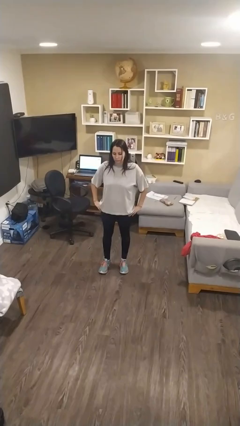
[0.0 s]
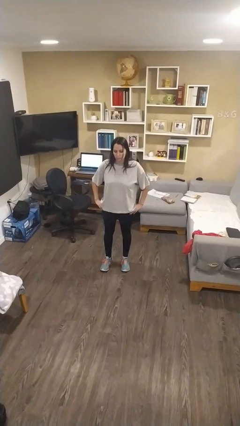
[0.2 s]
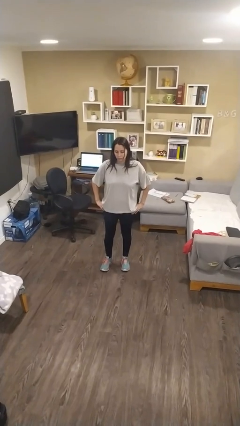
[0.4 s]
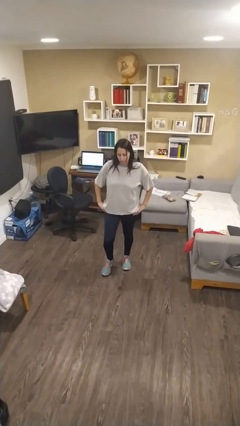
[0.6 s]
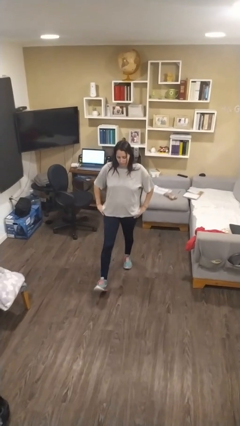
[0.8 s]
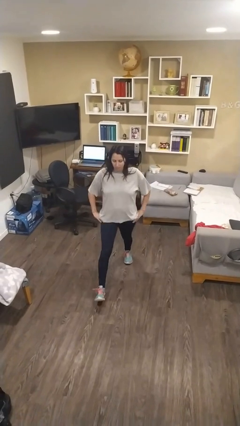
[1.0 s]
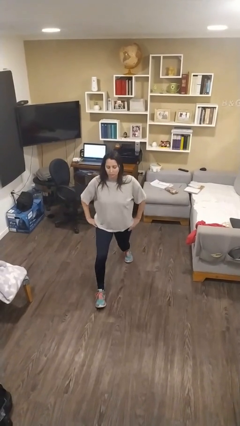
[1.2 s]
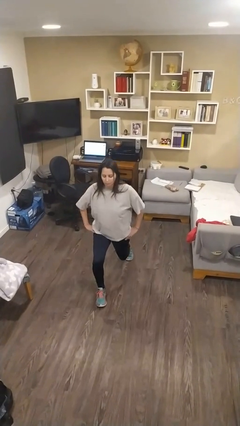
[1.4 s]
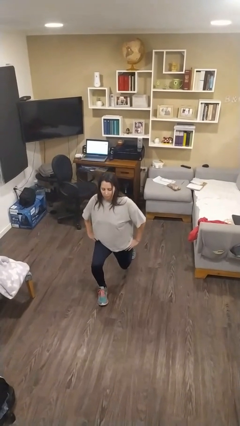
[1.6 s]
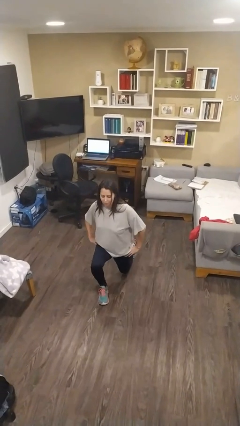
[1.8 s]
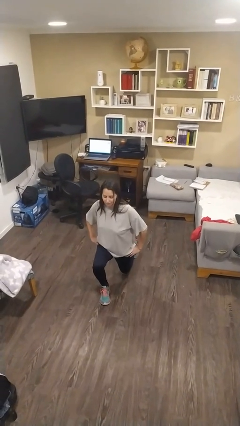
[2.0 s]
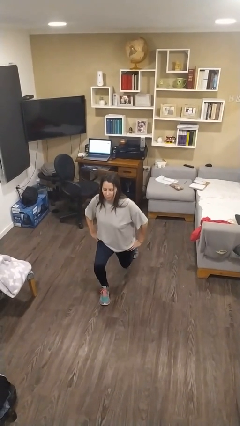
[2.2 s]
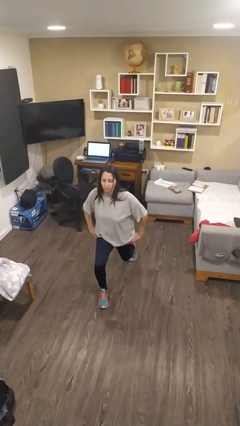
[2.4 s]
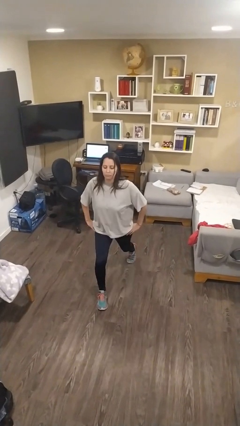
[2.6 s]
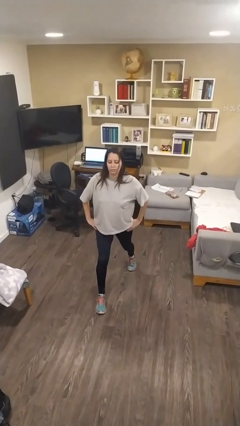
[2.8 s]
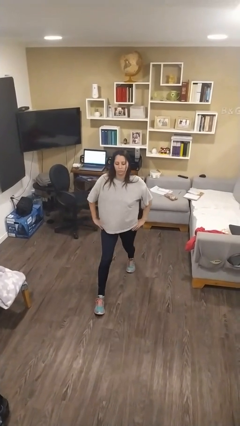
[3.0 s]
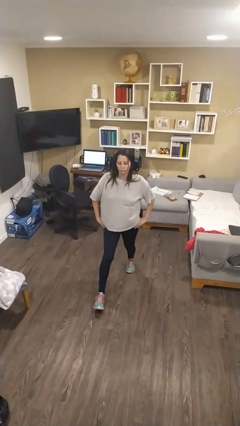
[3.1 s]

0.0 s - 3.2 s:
person exercises with lunges

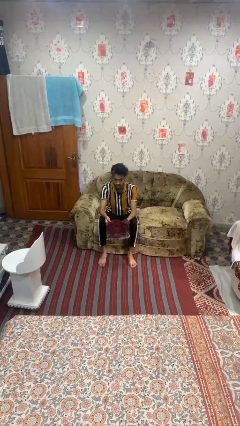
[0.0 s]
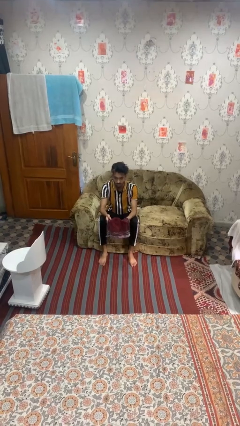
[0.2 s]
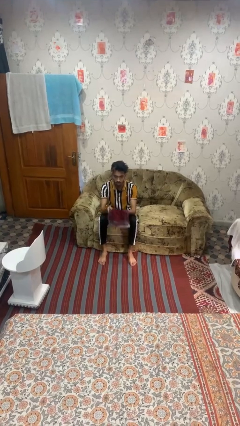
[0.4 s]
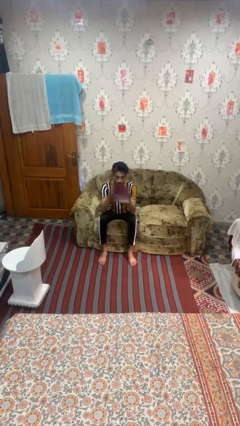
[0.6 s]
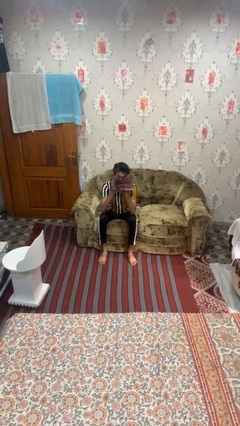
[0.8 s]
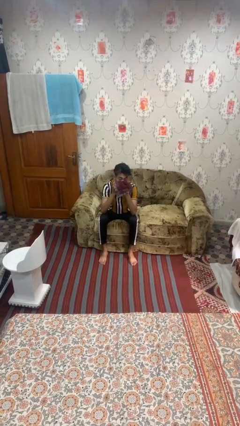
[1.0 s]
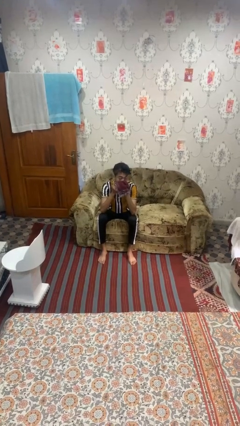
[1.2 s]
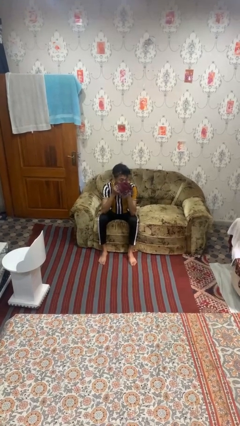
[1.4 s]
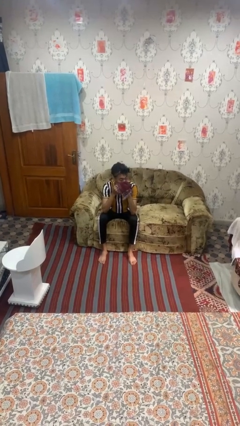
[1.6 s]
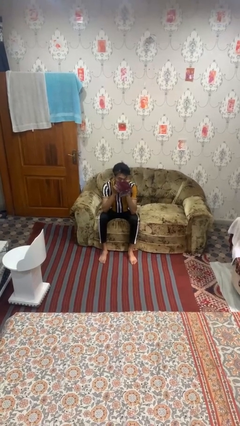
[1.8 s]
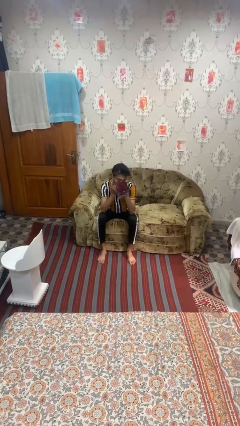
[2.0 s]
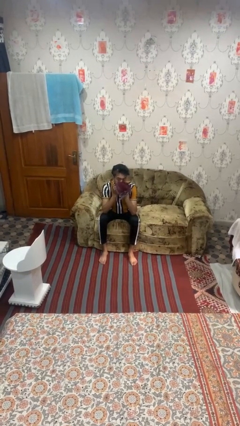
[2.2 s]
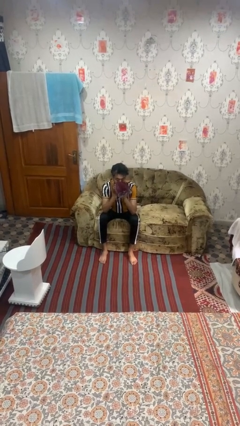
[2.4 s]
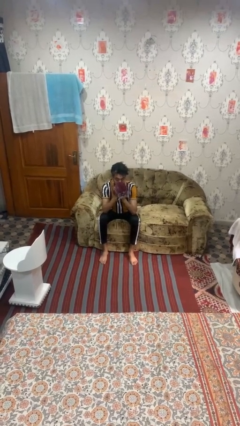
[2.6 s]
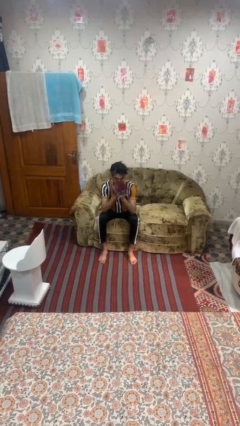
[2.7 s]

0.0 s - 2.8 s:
person blows nose

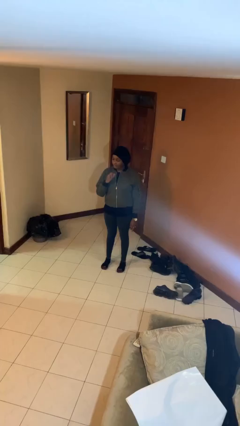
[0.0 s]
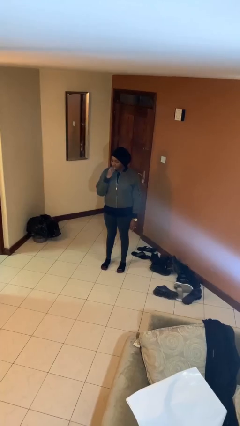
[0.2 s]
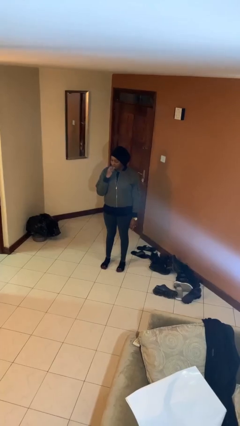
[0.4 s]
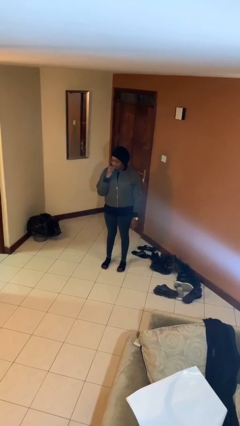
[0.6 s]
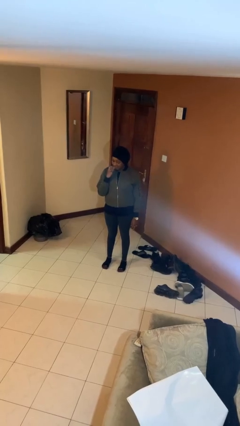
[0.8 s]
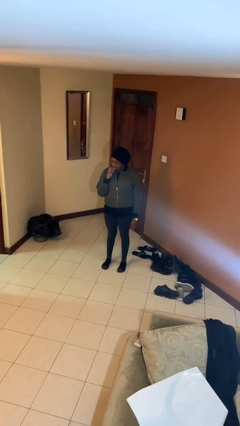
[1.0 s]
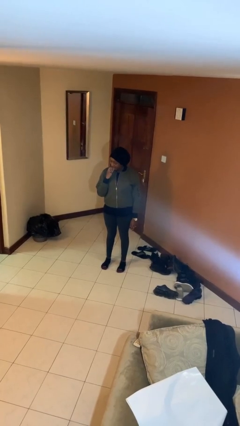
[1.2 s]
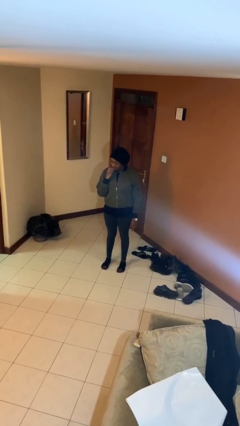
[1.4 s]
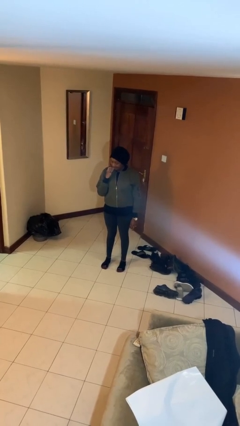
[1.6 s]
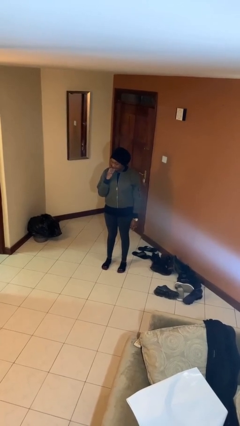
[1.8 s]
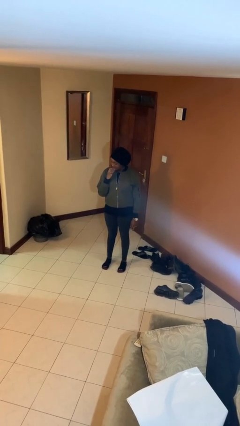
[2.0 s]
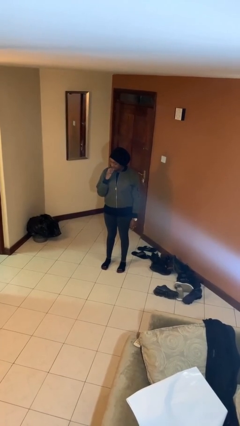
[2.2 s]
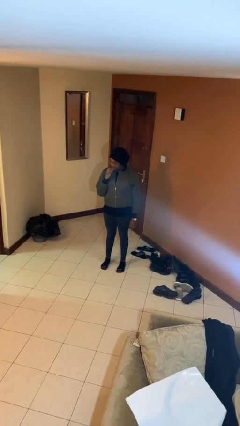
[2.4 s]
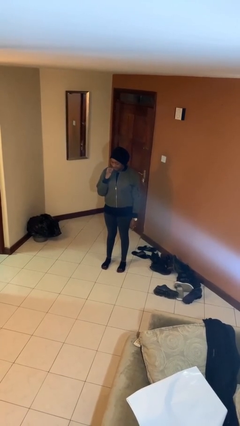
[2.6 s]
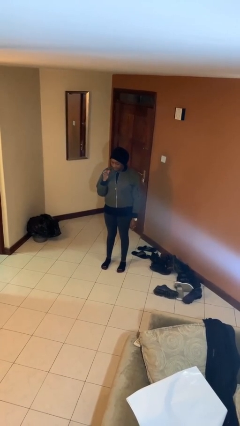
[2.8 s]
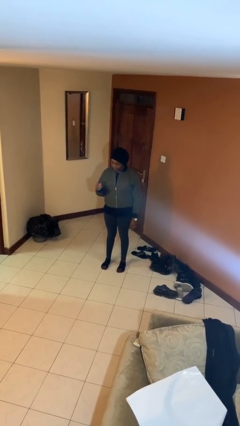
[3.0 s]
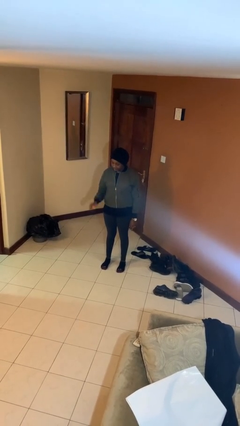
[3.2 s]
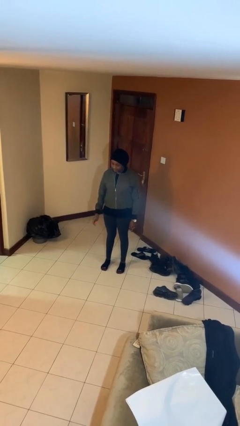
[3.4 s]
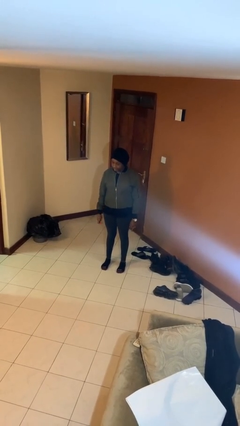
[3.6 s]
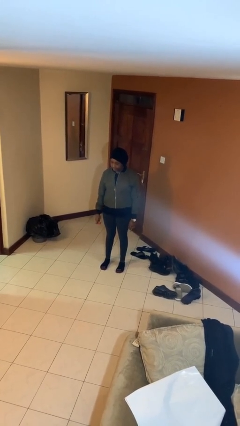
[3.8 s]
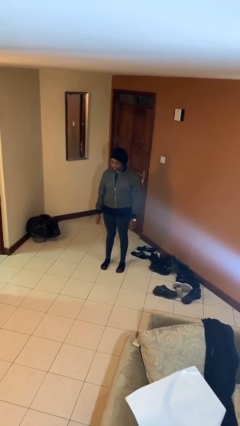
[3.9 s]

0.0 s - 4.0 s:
person applies lip makeup

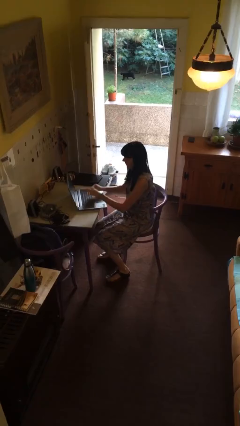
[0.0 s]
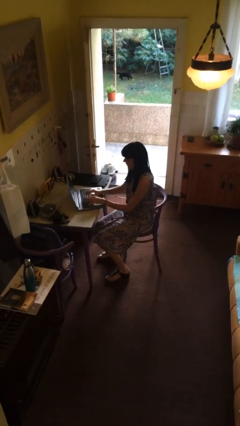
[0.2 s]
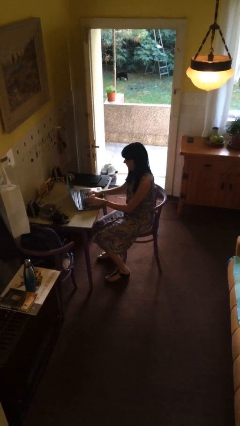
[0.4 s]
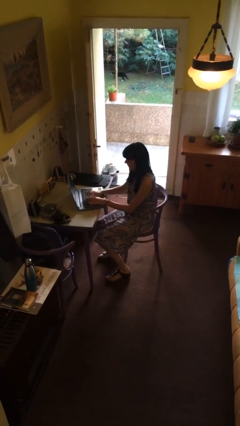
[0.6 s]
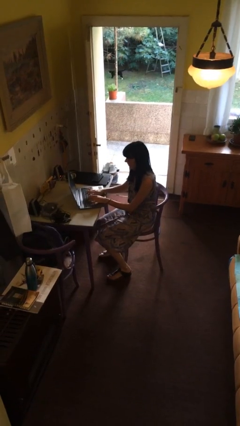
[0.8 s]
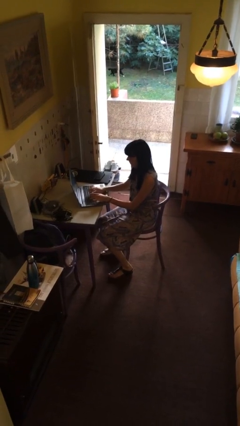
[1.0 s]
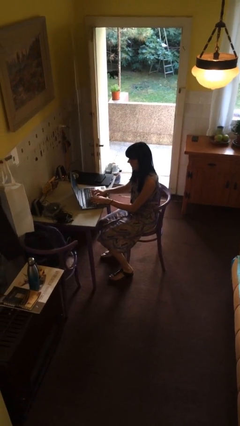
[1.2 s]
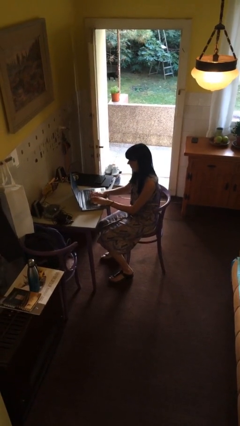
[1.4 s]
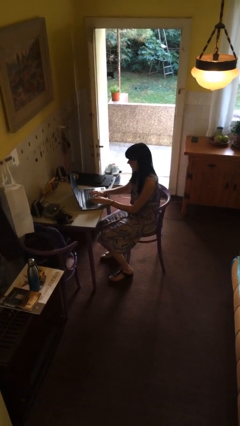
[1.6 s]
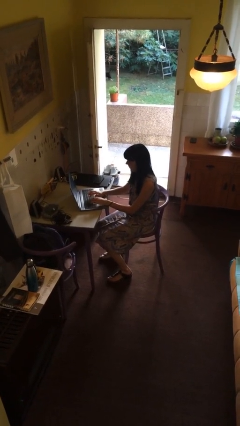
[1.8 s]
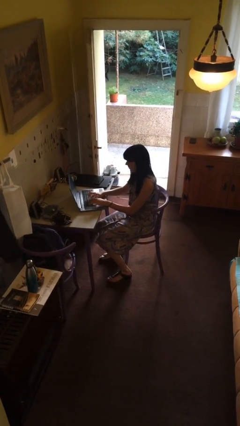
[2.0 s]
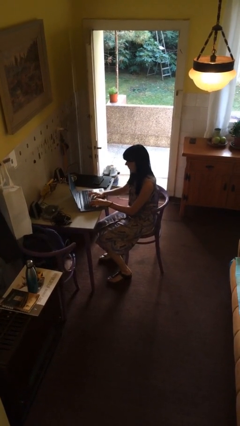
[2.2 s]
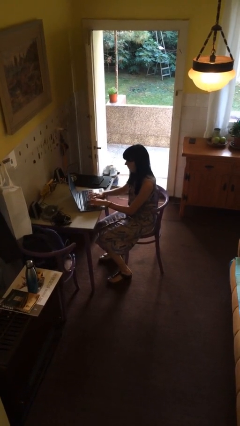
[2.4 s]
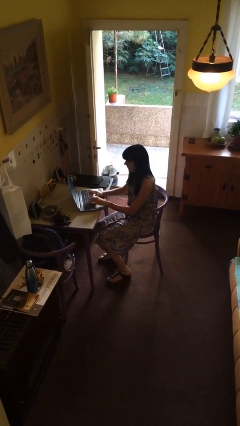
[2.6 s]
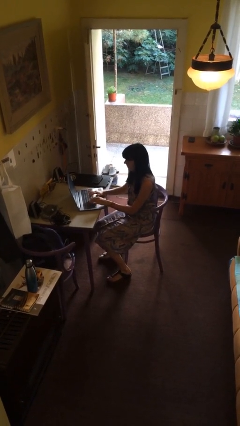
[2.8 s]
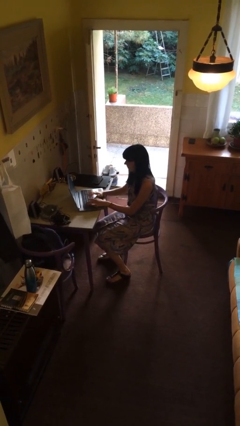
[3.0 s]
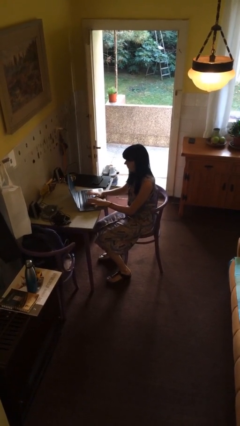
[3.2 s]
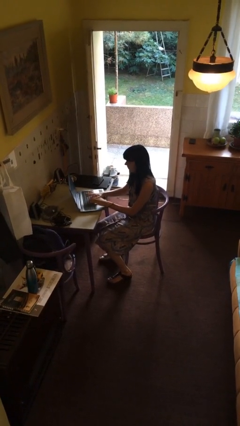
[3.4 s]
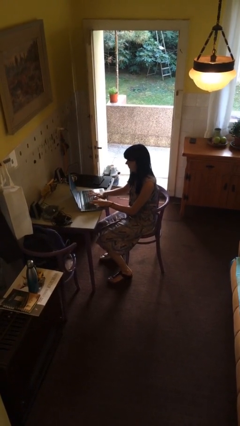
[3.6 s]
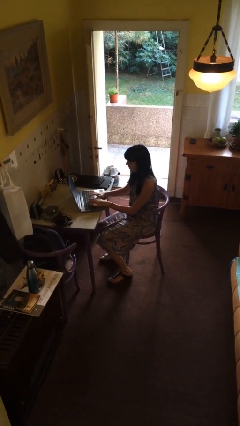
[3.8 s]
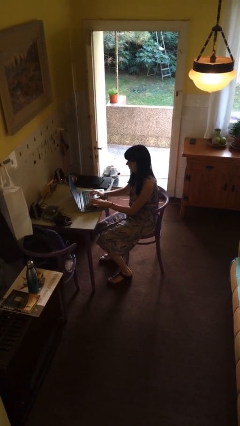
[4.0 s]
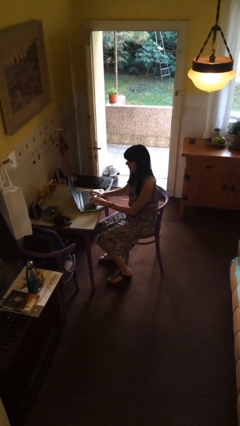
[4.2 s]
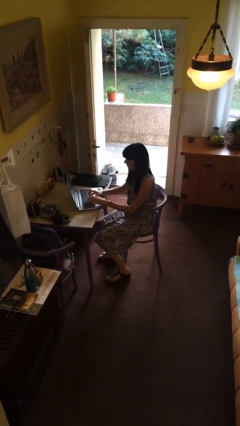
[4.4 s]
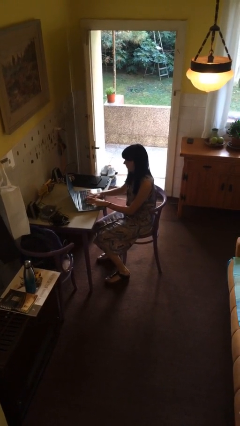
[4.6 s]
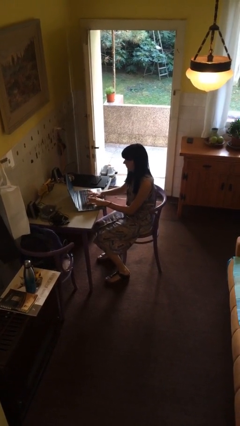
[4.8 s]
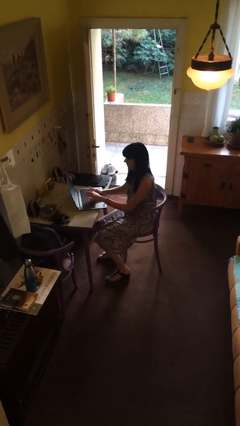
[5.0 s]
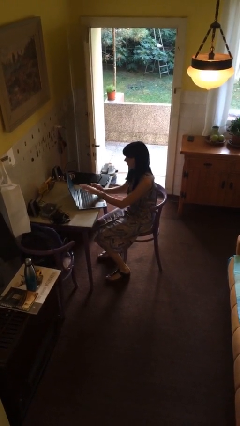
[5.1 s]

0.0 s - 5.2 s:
person interacts with laptop

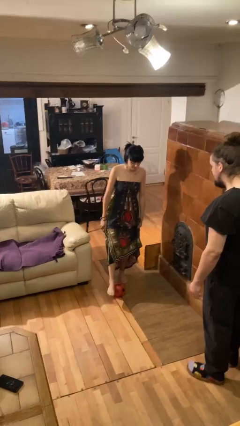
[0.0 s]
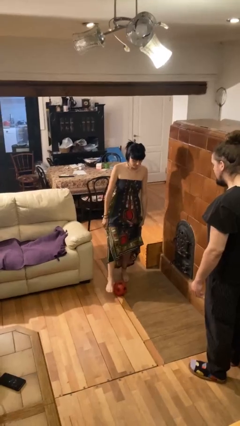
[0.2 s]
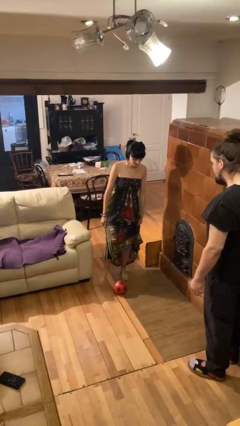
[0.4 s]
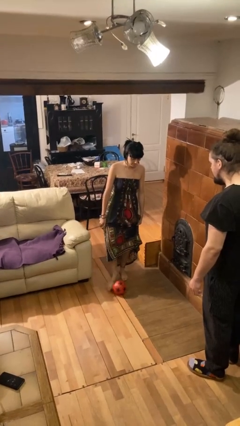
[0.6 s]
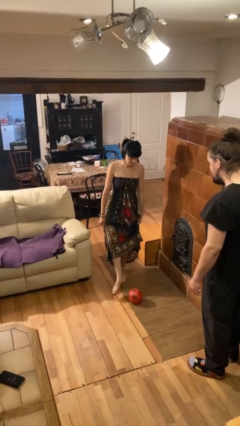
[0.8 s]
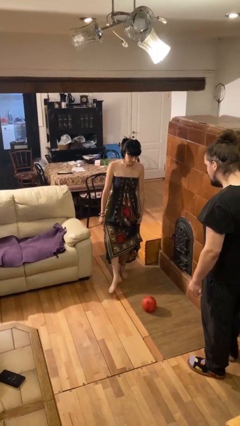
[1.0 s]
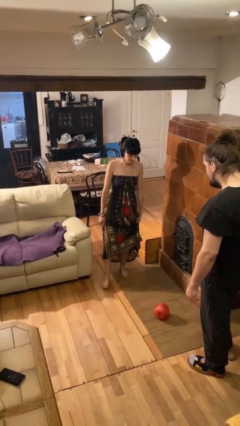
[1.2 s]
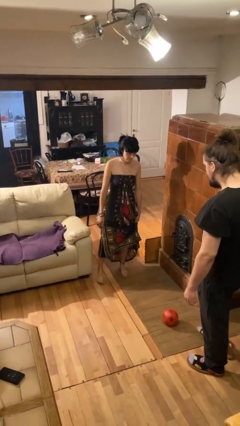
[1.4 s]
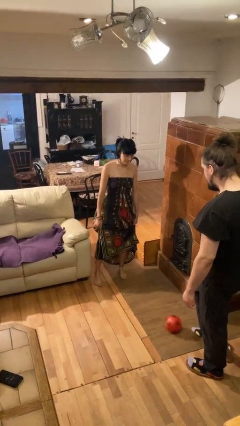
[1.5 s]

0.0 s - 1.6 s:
person kicks object to person

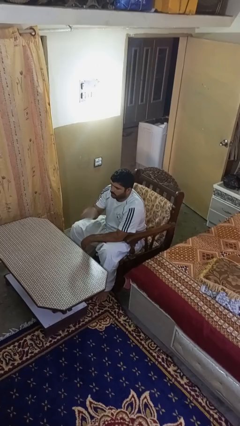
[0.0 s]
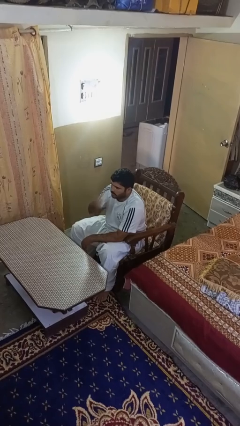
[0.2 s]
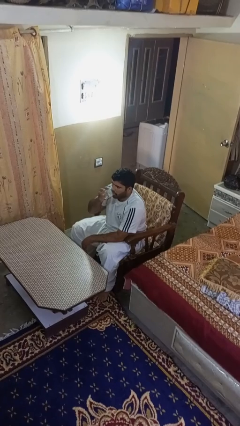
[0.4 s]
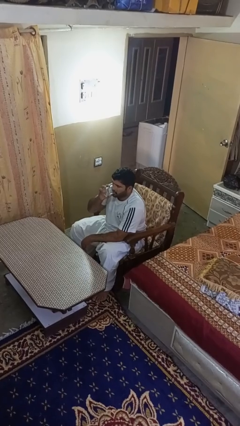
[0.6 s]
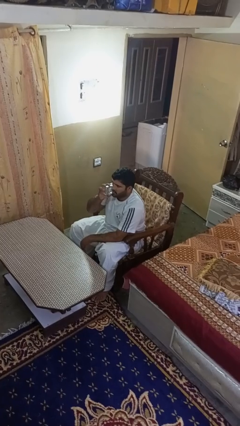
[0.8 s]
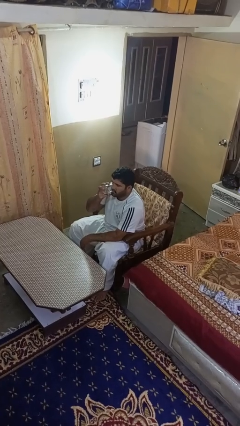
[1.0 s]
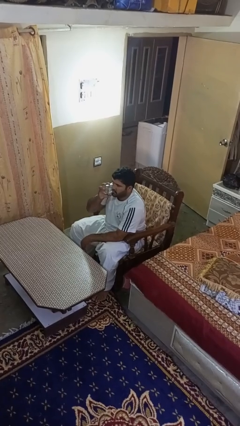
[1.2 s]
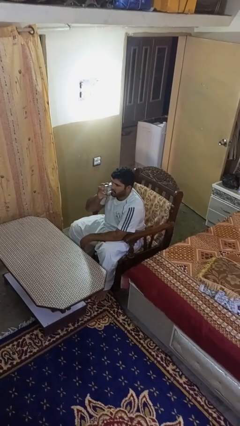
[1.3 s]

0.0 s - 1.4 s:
person drinks from shotglass
